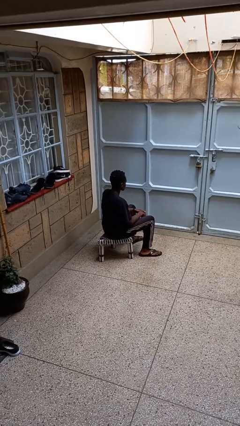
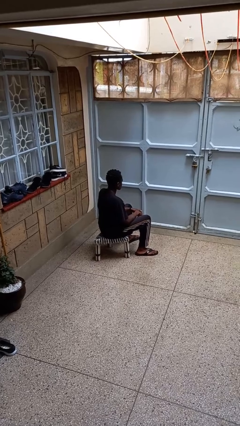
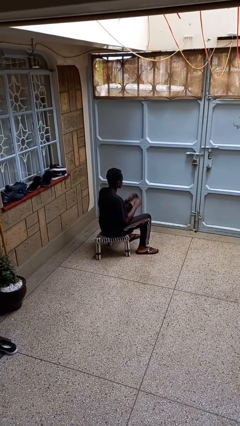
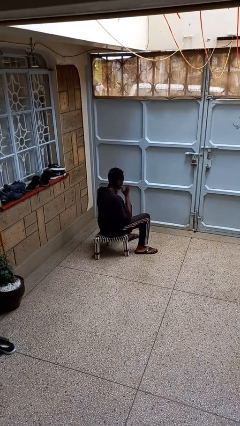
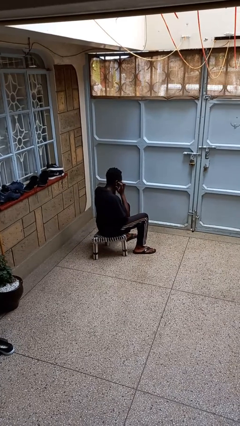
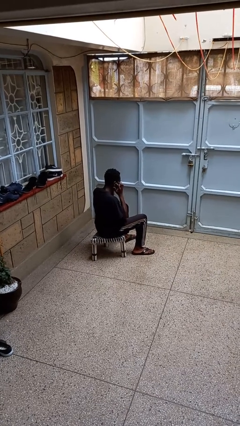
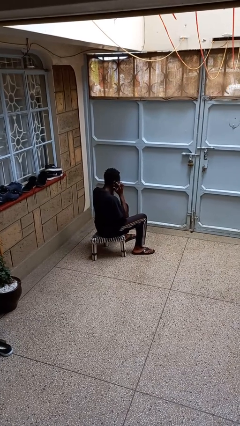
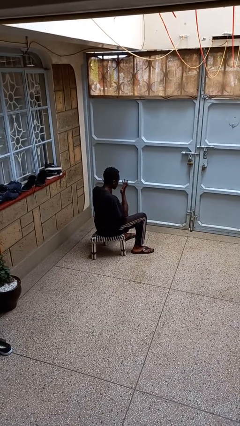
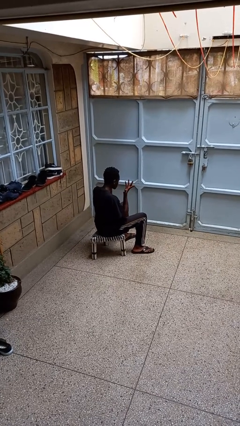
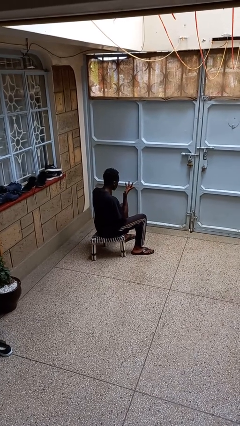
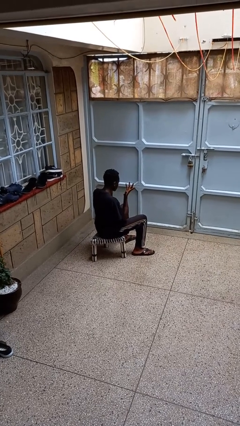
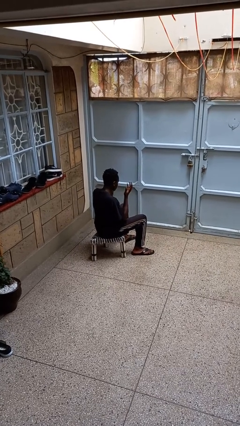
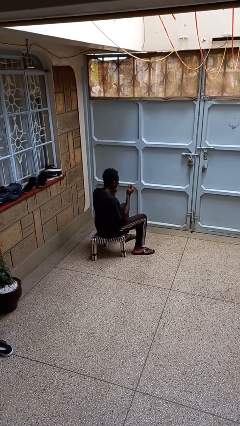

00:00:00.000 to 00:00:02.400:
person puts fingers in ear

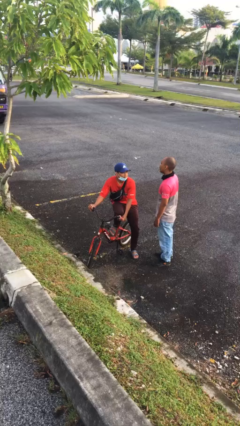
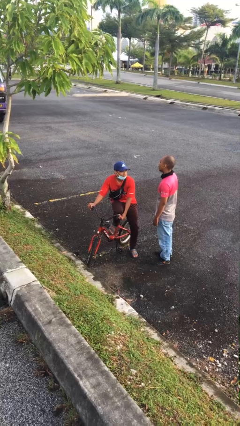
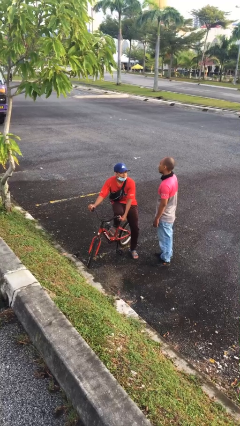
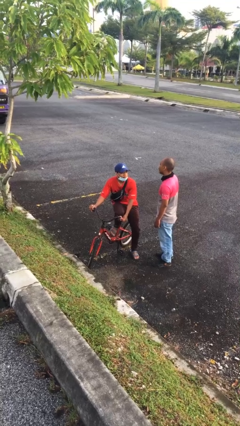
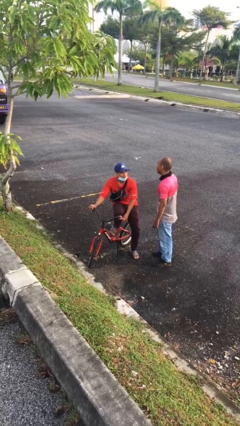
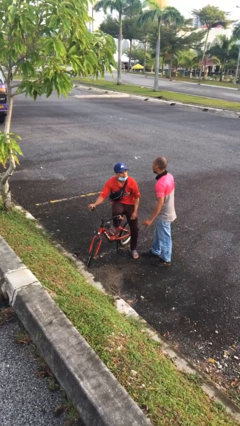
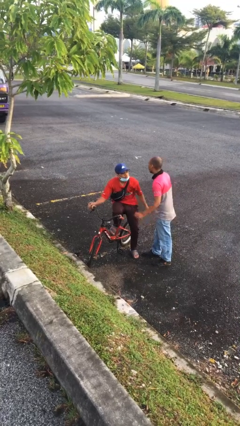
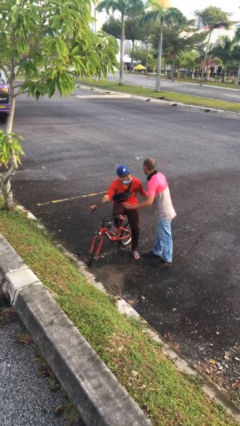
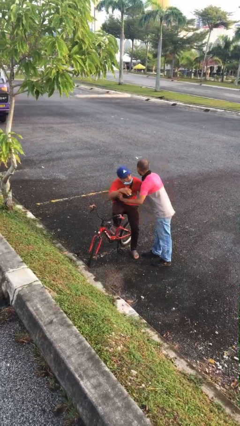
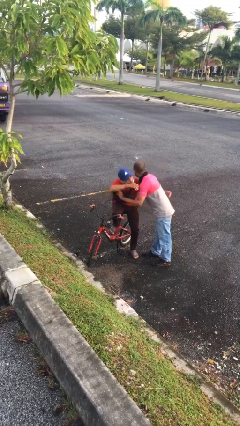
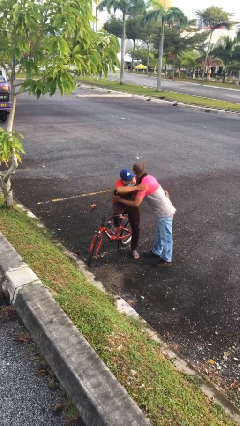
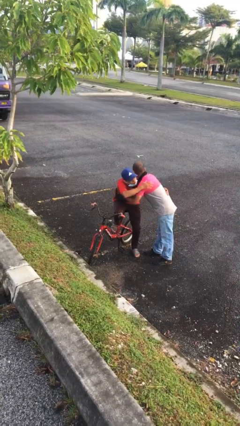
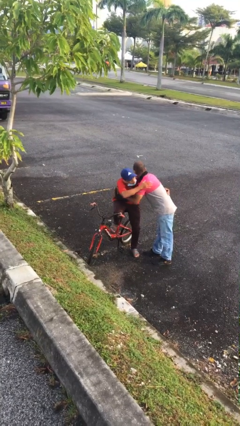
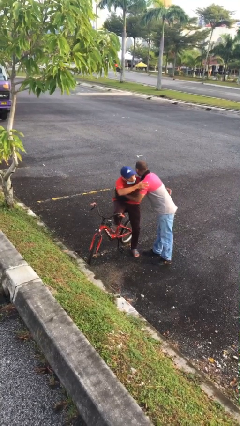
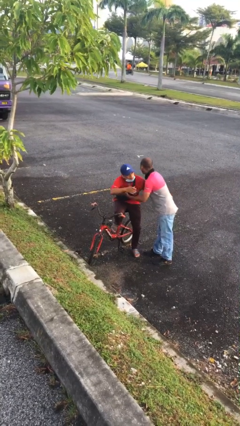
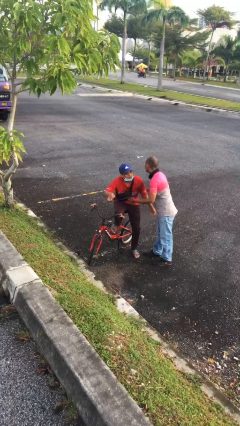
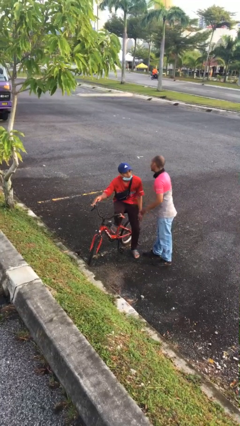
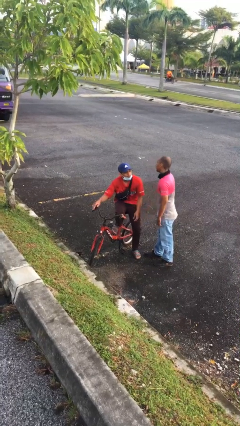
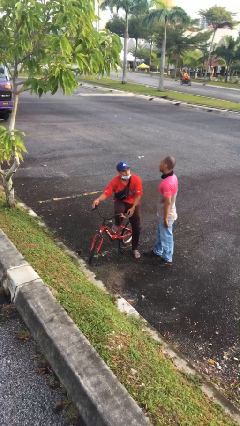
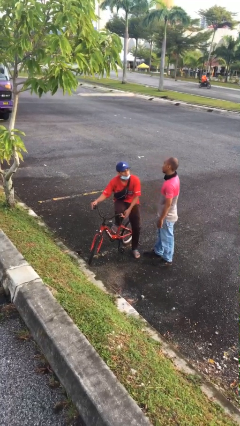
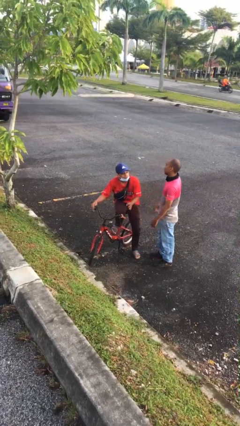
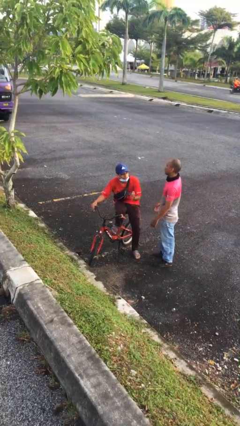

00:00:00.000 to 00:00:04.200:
person embraces person

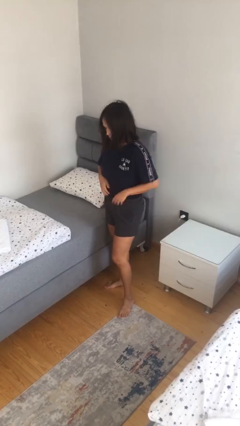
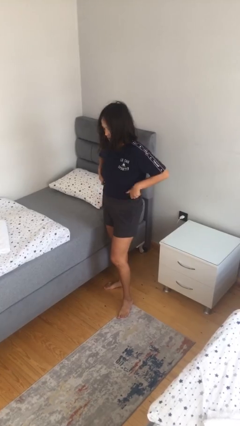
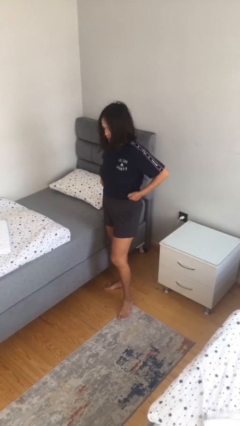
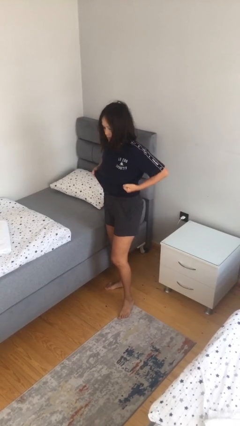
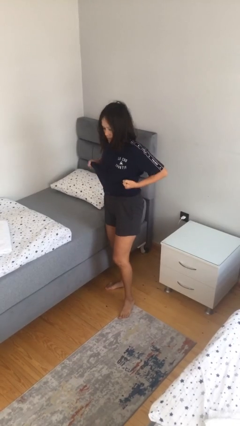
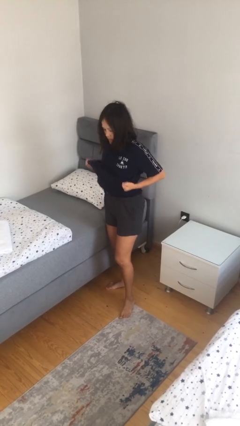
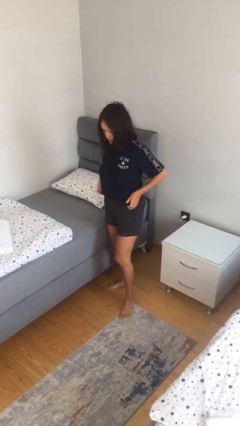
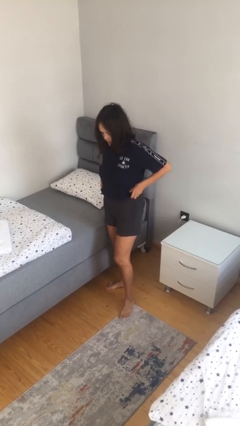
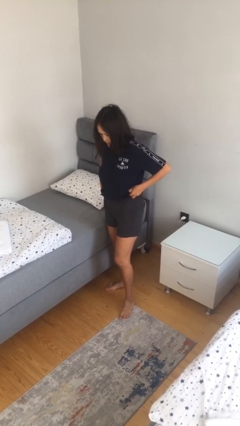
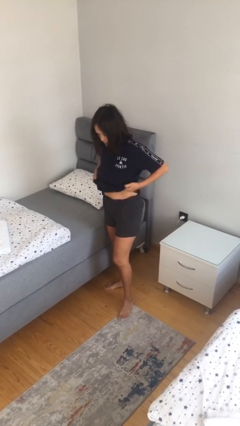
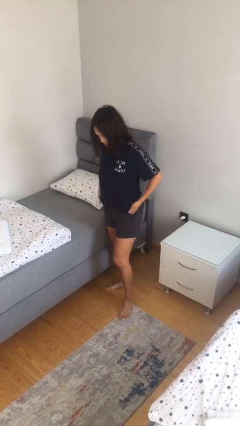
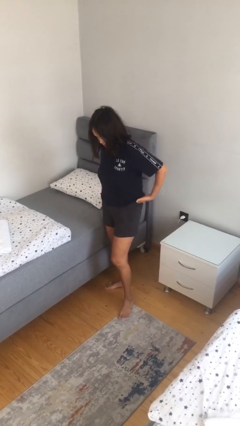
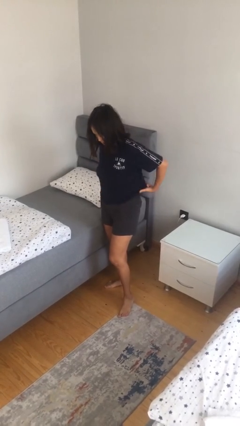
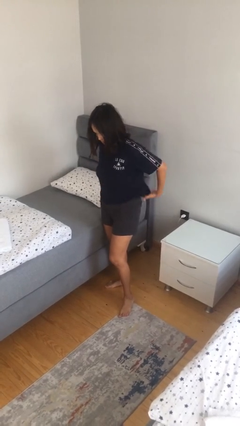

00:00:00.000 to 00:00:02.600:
person untucks shirt

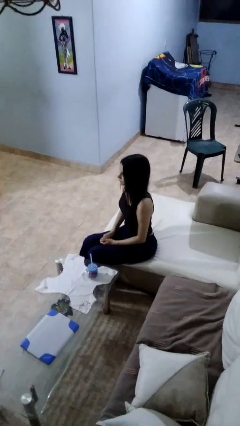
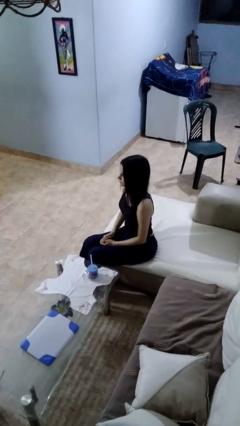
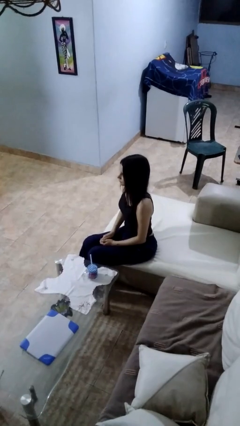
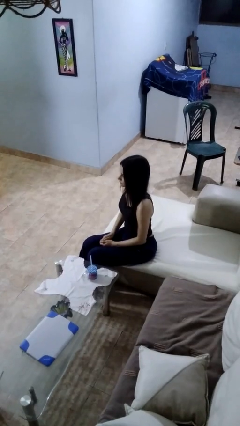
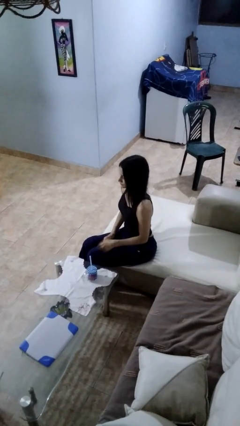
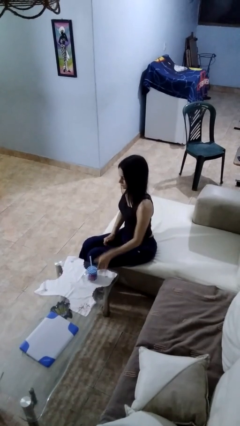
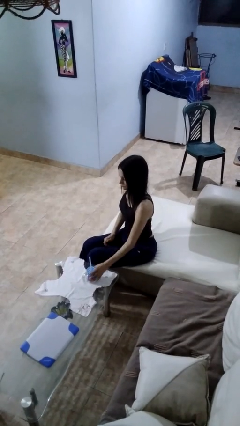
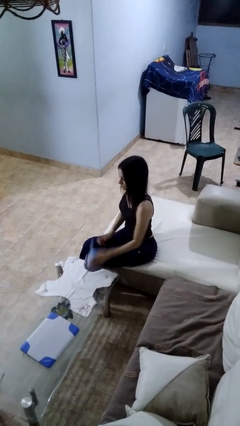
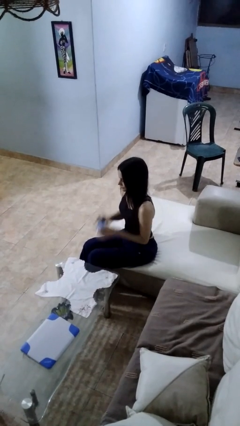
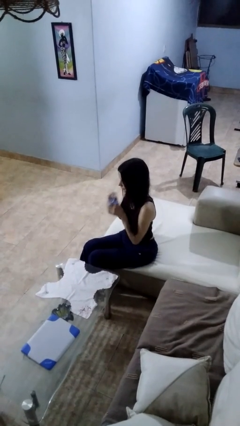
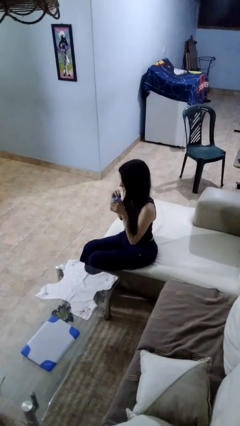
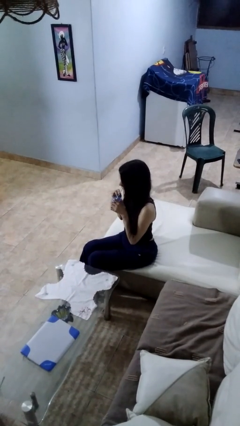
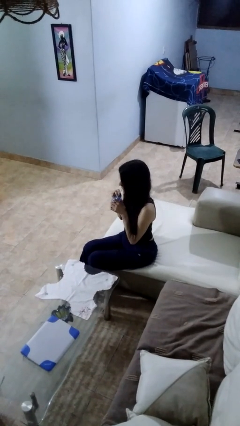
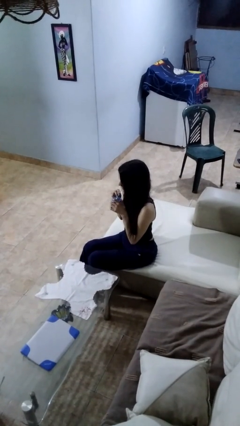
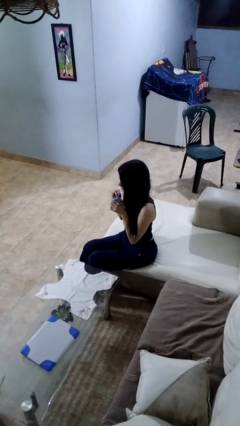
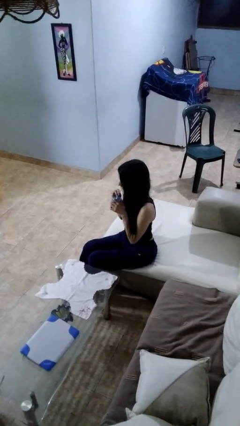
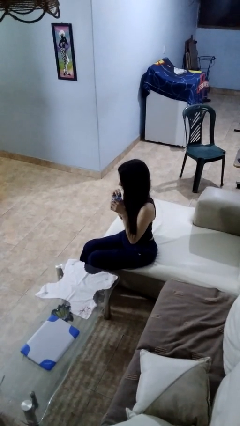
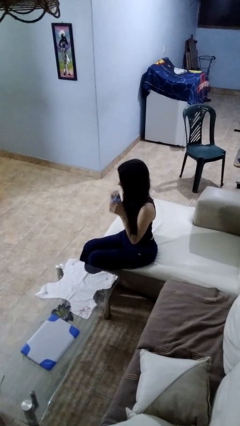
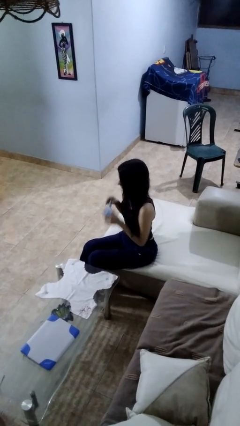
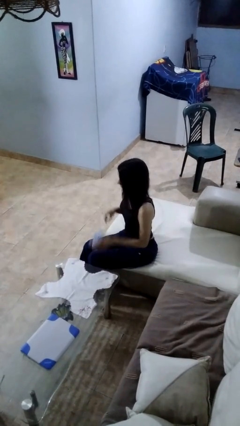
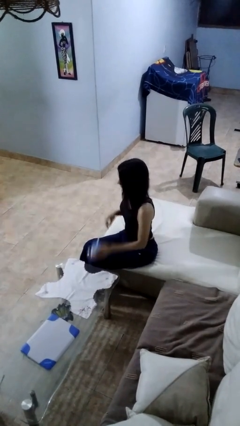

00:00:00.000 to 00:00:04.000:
person drinks from straw

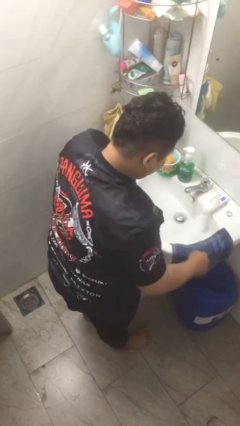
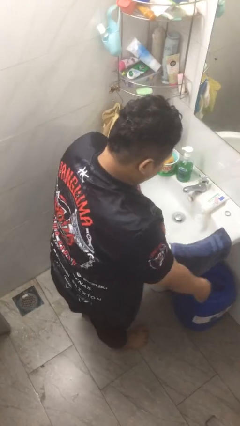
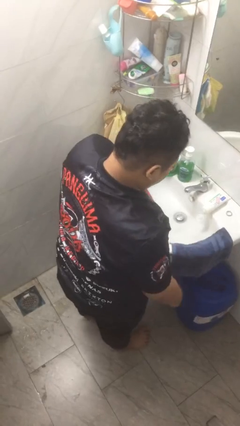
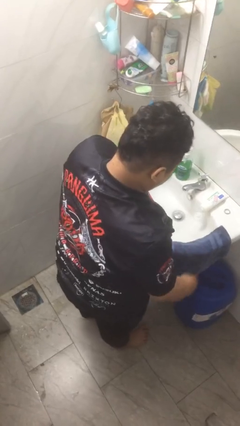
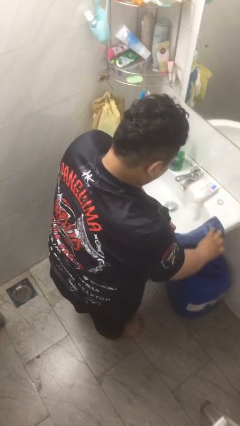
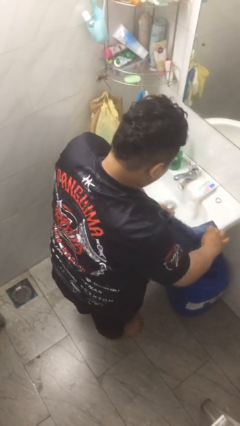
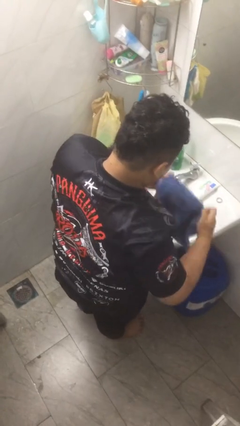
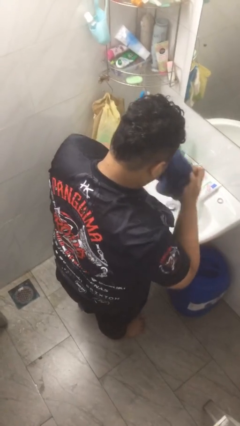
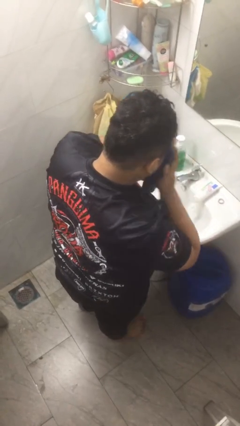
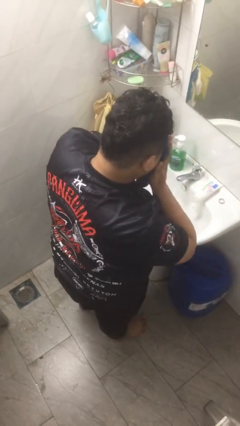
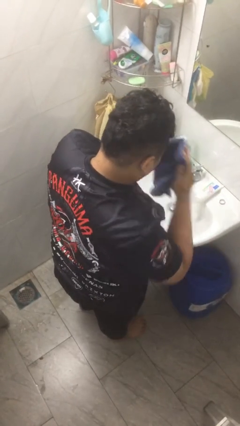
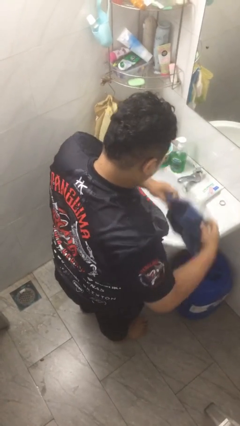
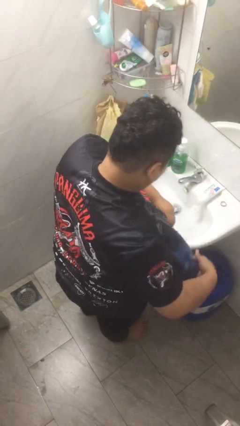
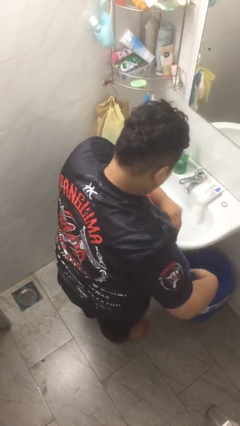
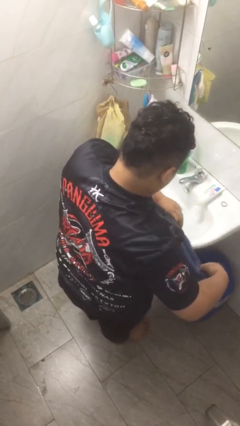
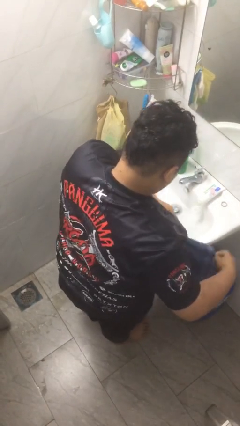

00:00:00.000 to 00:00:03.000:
person dries face with towel

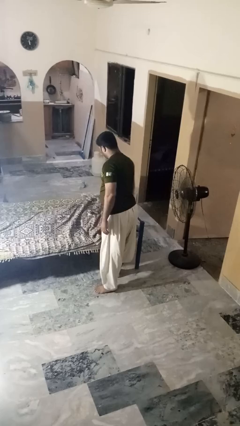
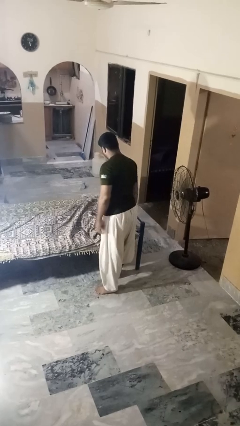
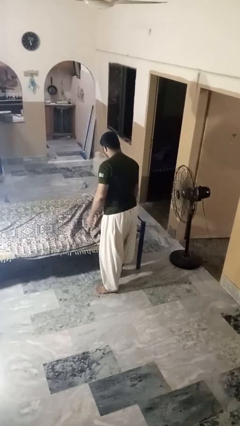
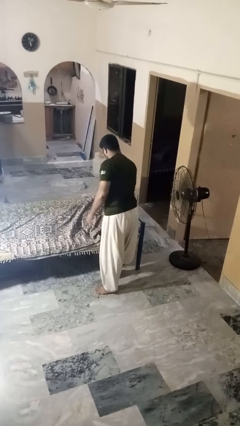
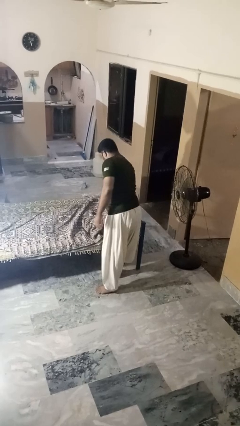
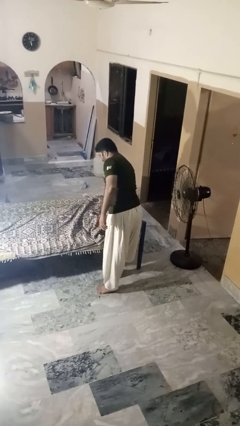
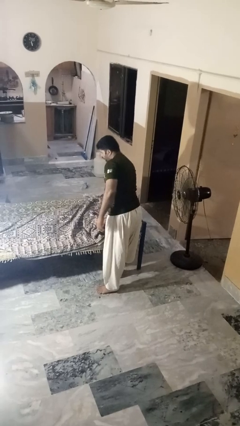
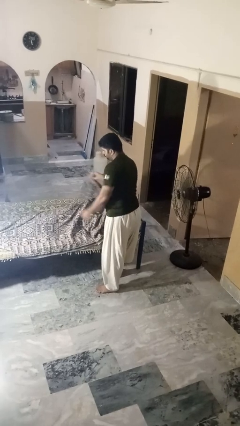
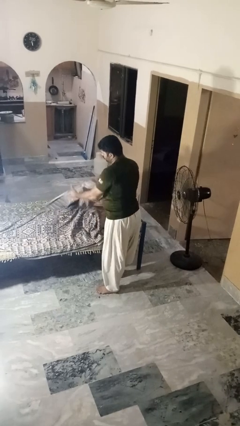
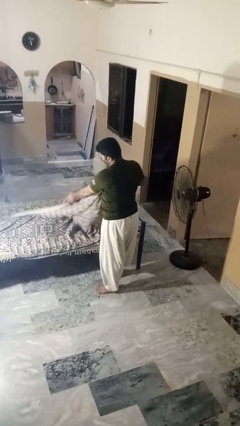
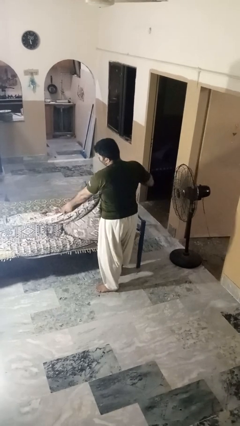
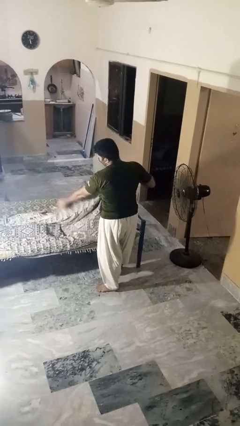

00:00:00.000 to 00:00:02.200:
person uncovers friend with blanket
